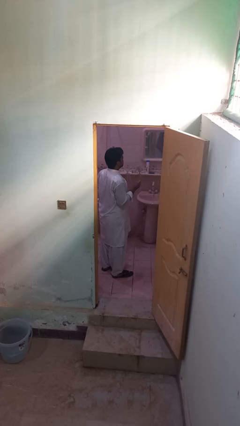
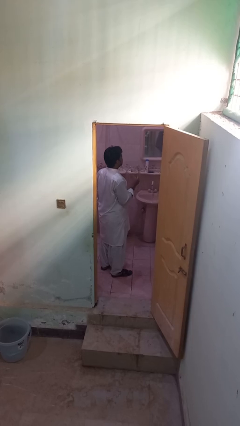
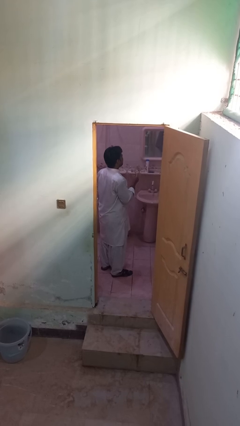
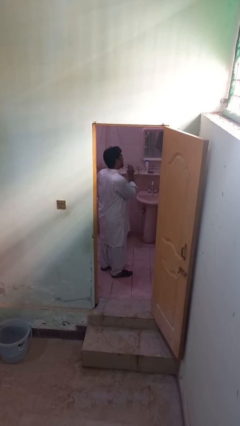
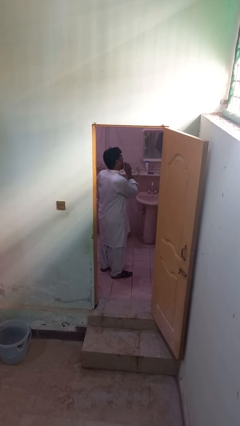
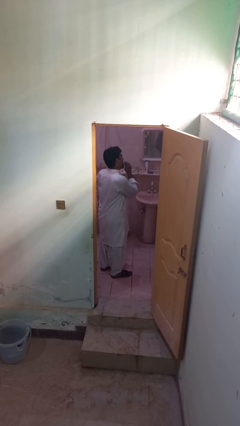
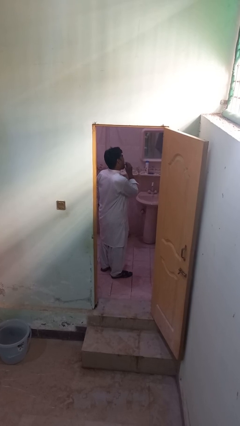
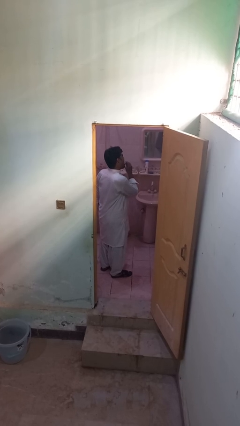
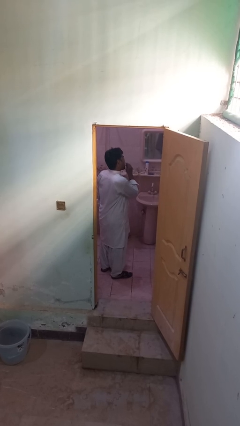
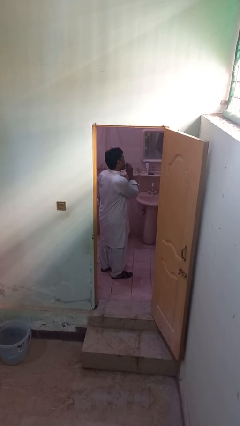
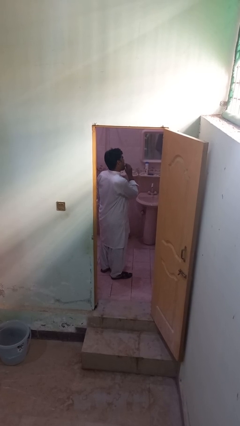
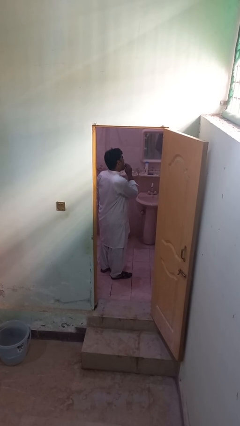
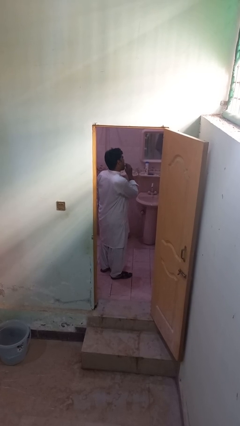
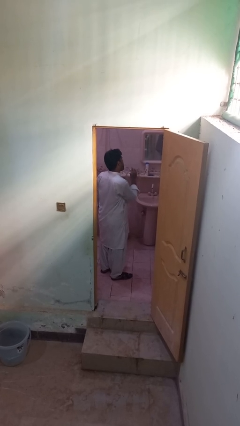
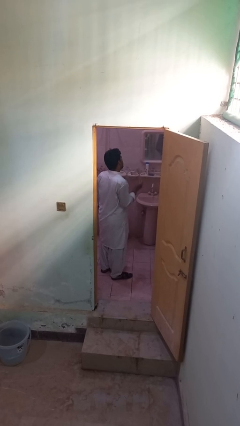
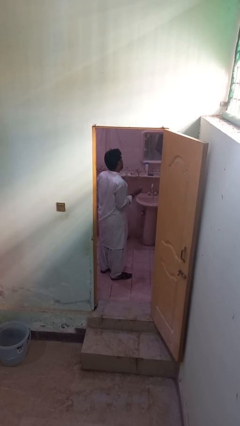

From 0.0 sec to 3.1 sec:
person flosses

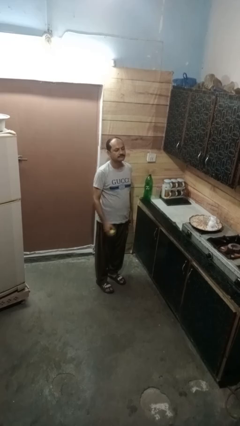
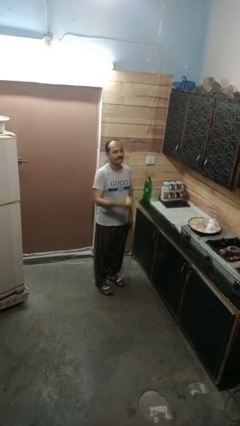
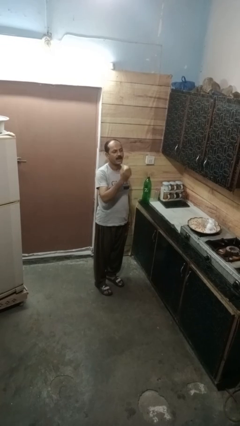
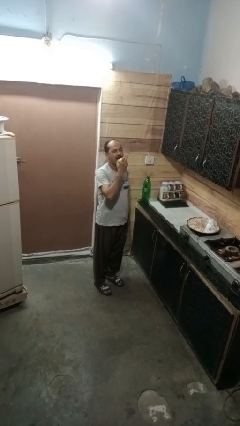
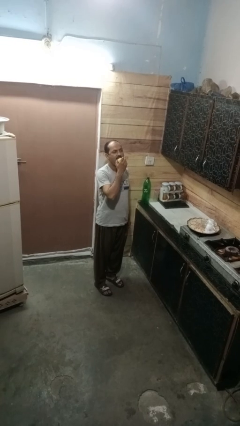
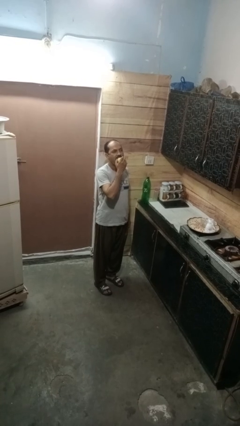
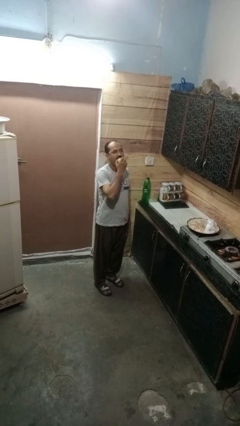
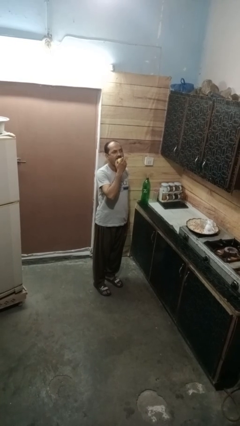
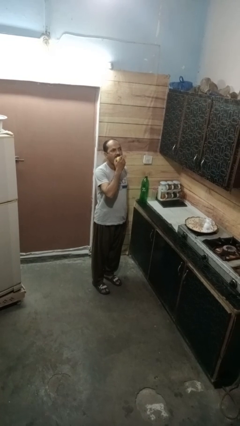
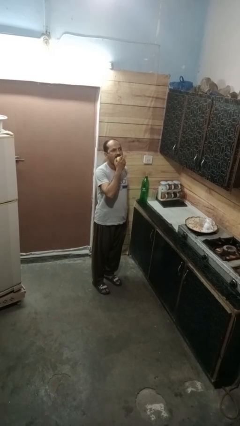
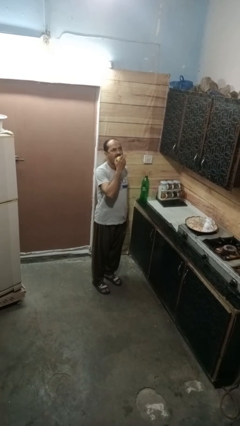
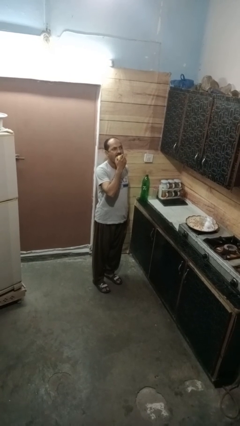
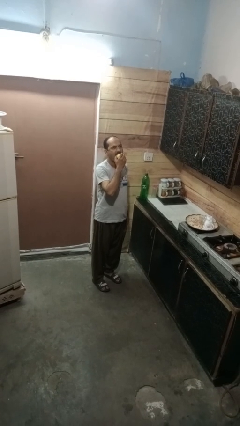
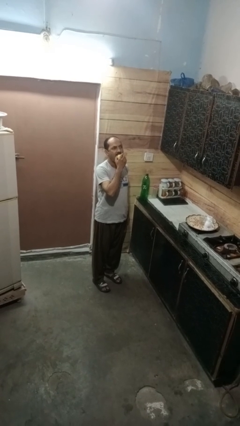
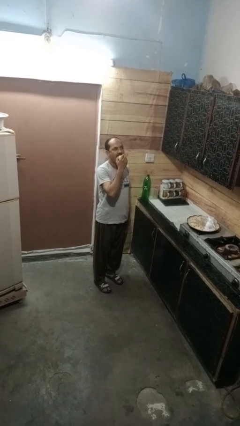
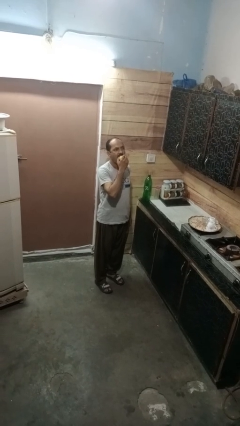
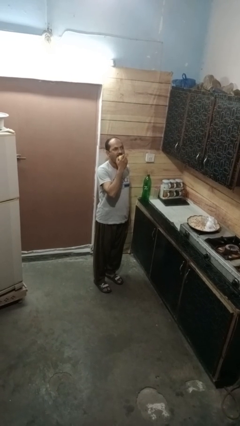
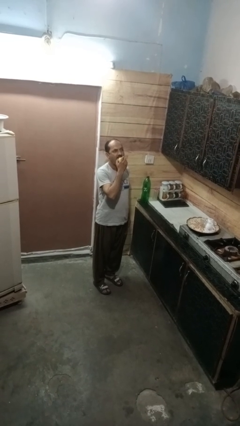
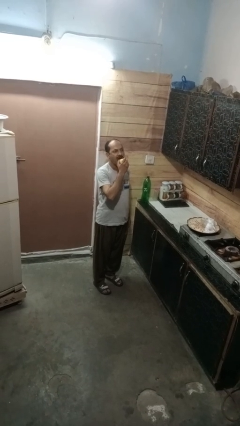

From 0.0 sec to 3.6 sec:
person eats apple

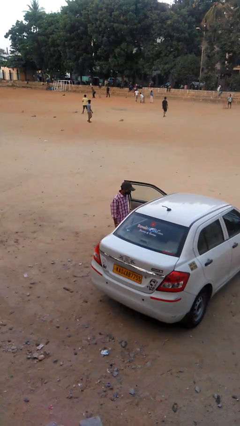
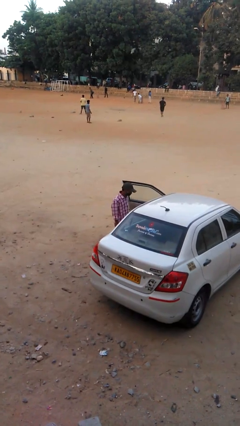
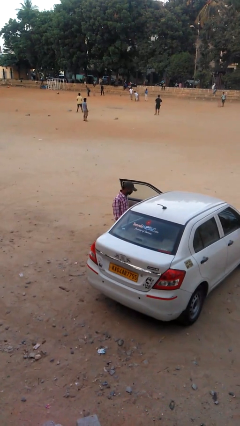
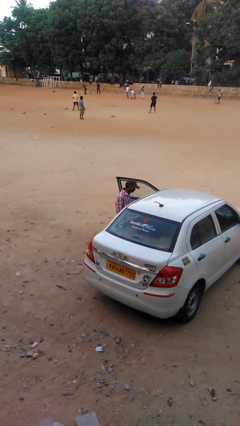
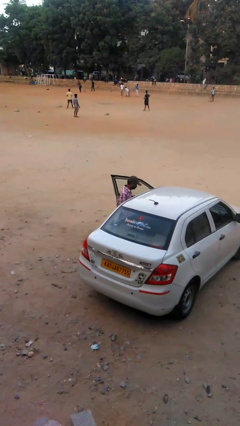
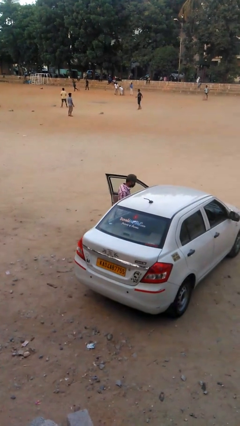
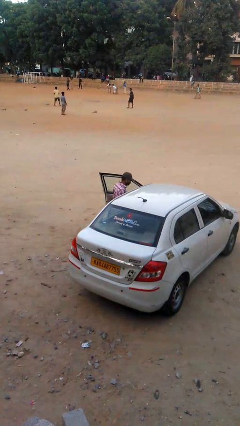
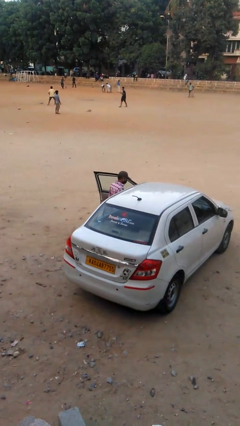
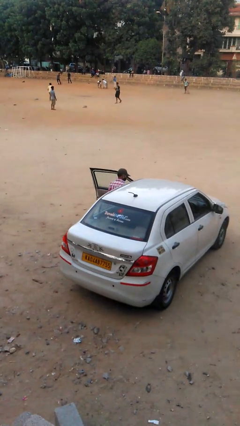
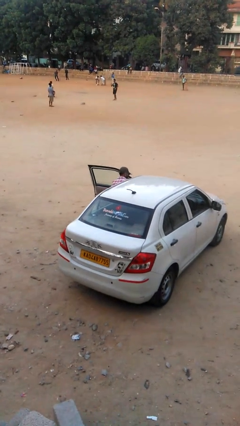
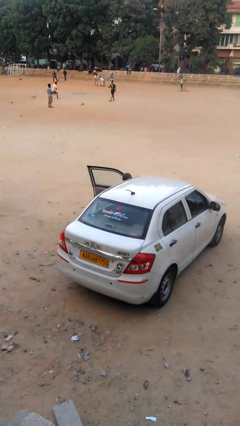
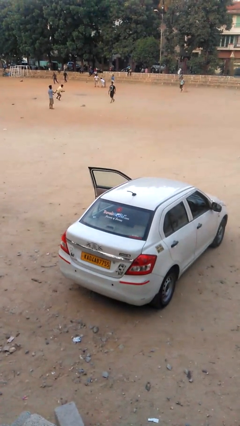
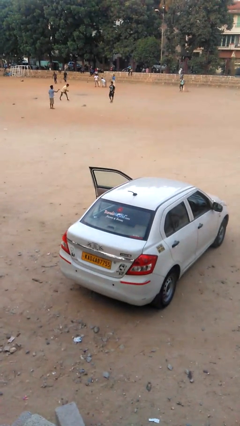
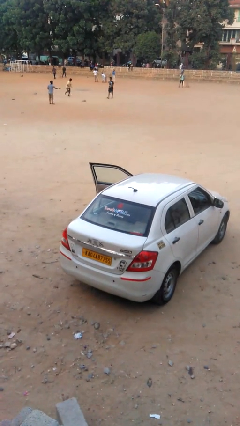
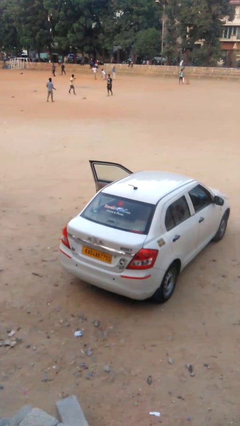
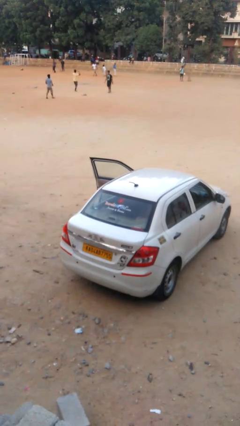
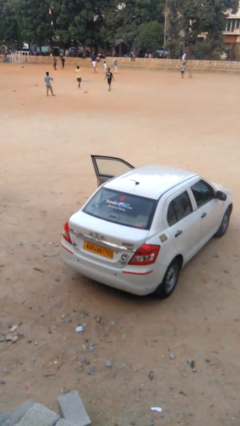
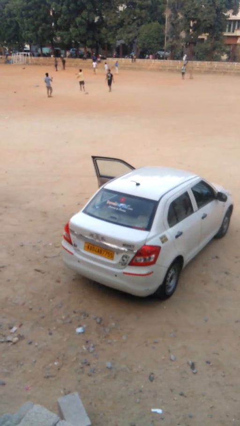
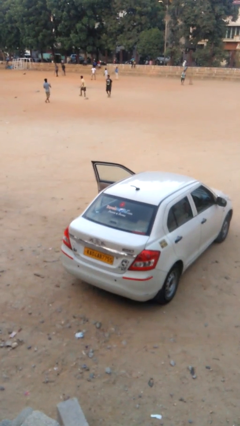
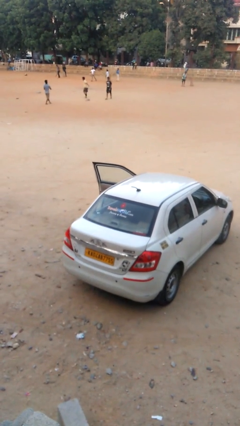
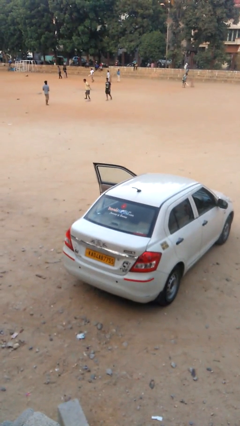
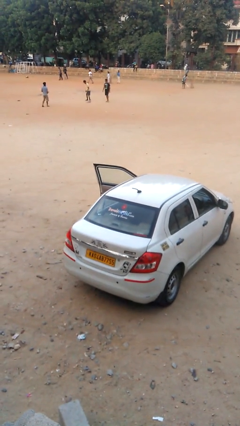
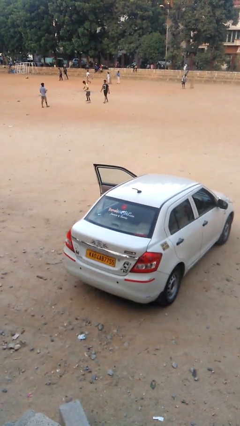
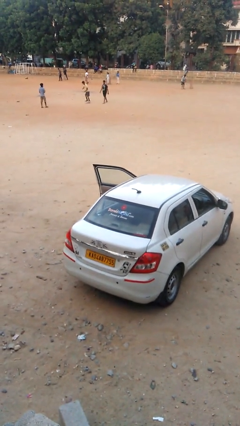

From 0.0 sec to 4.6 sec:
person enters car

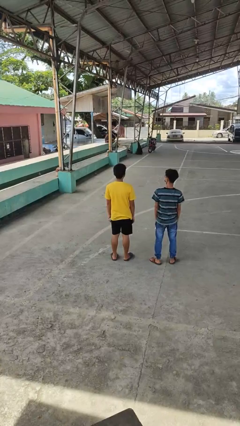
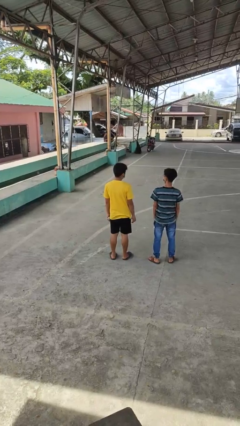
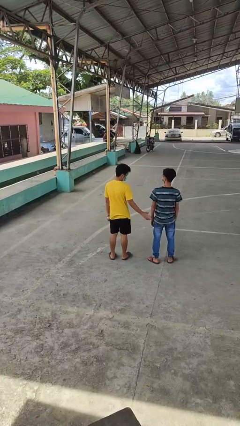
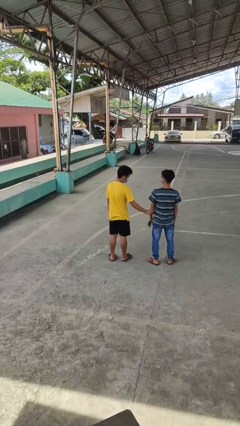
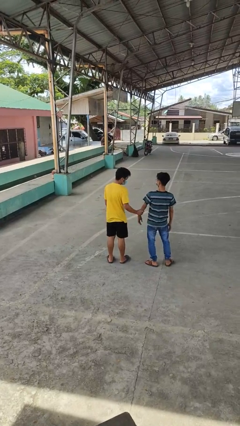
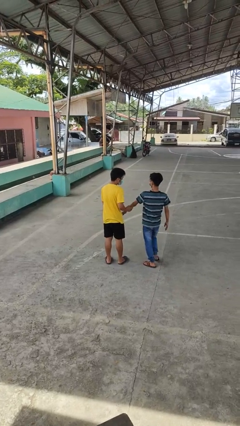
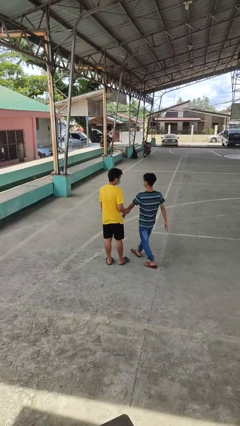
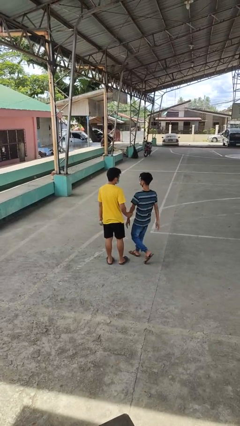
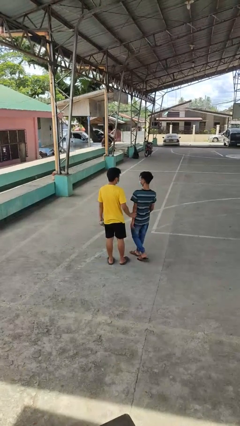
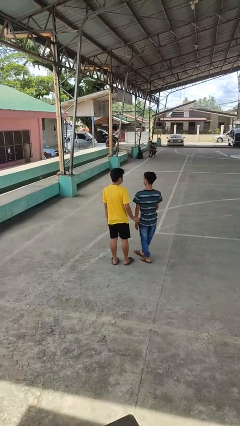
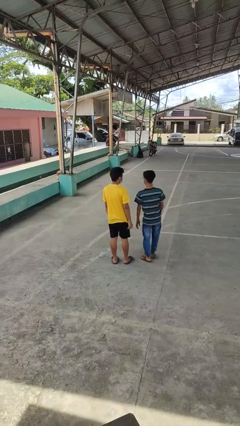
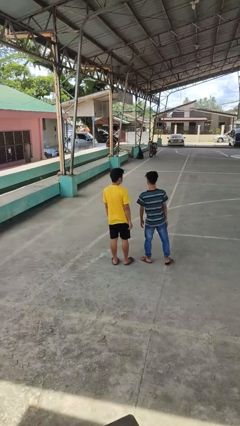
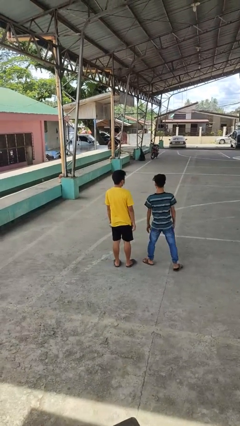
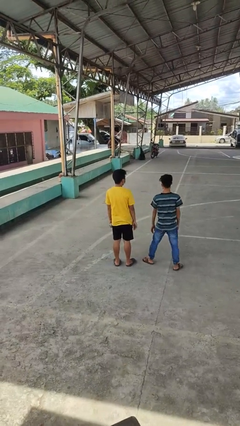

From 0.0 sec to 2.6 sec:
person grabs person by forearm

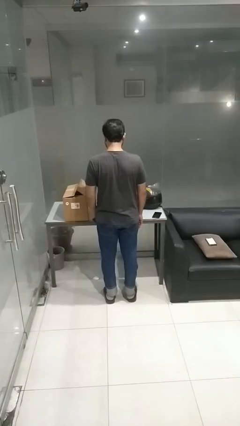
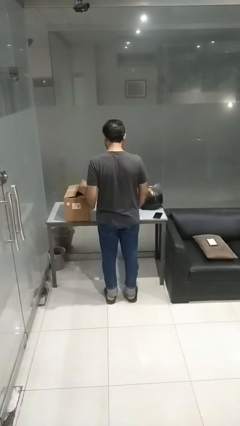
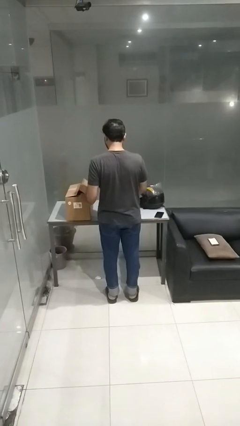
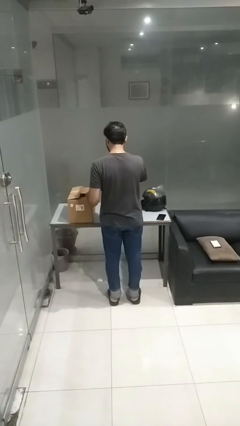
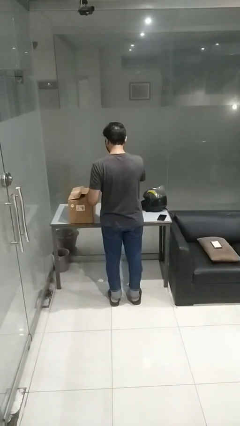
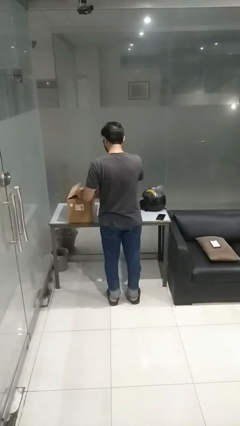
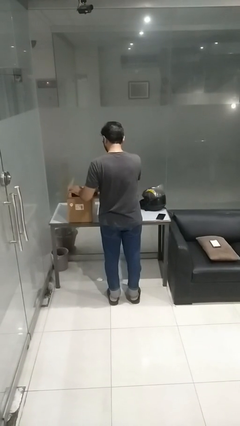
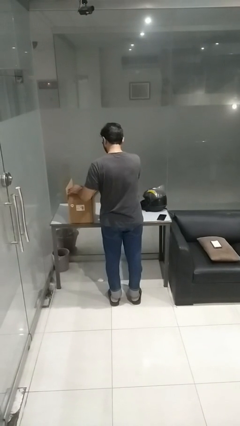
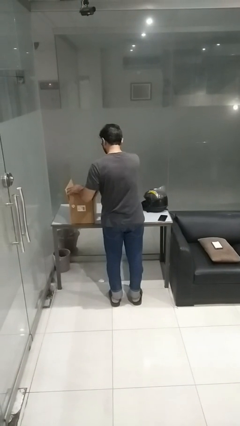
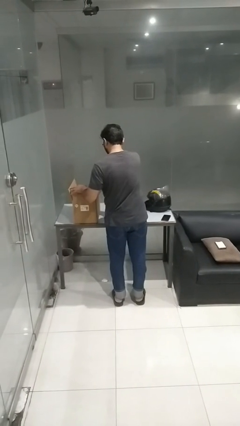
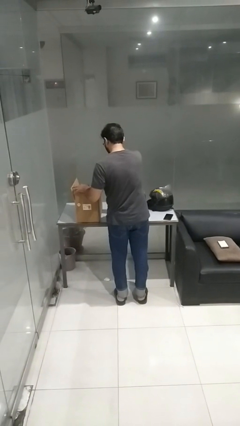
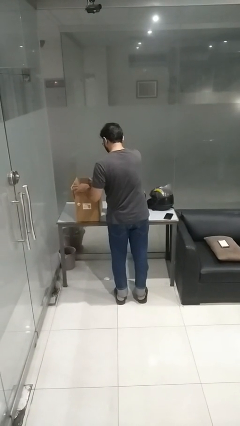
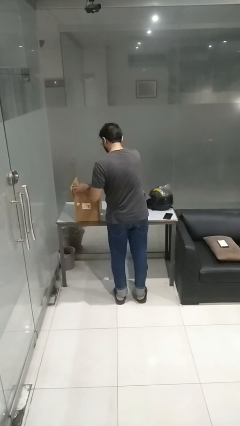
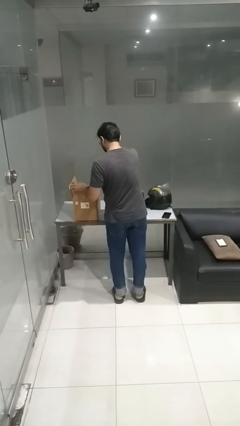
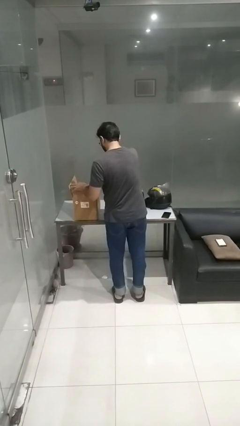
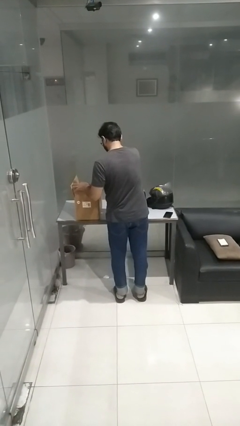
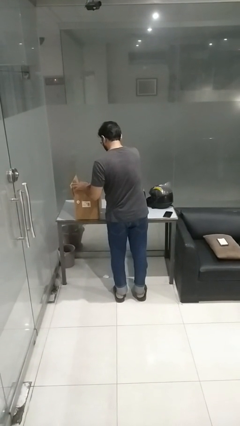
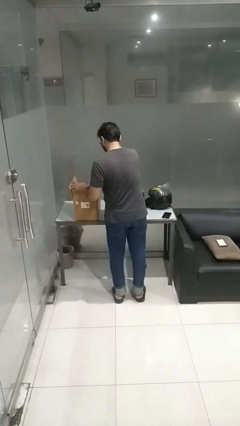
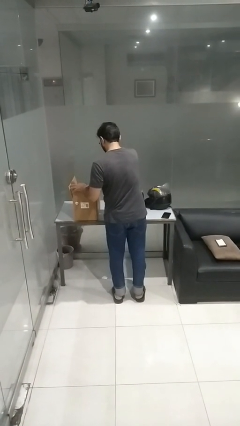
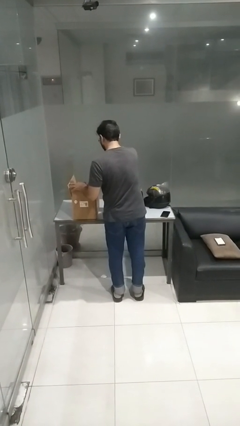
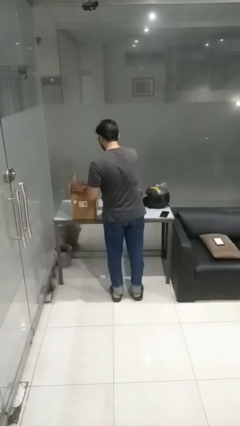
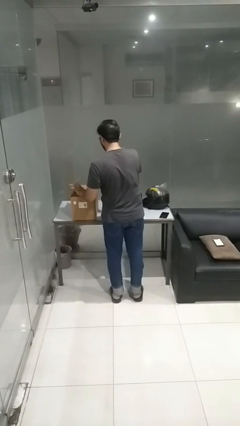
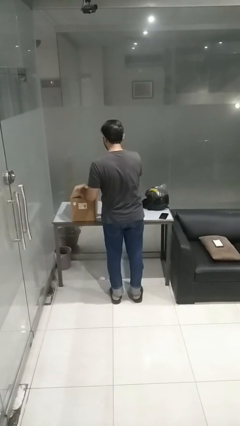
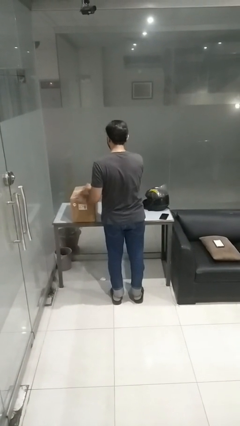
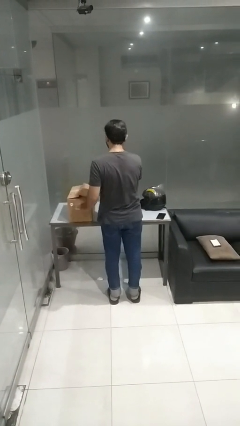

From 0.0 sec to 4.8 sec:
person searches in box
